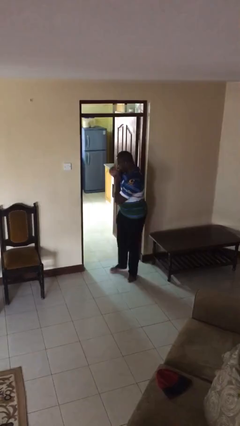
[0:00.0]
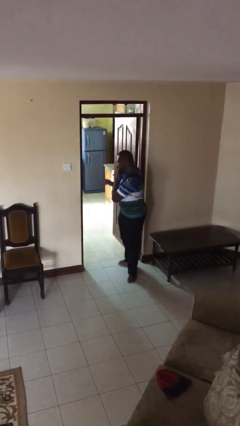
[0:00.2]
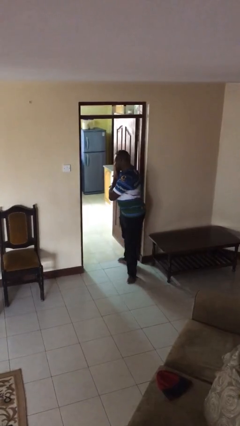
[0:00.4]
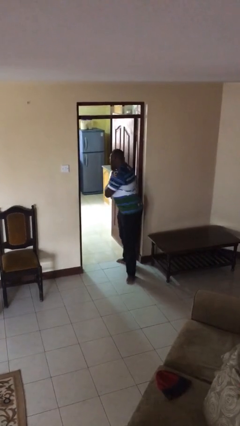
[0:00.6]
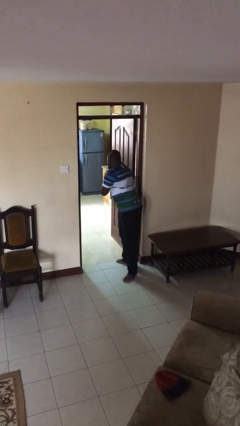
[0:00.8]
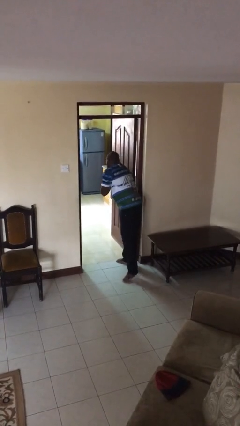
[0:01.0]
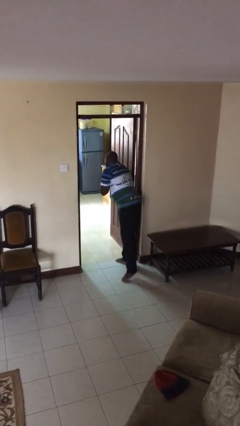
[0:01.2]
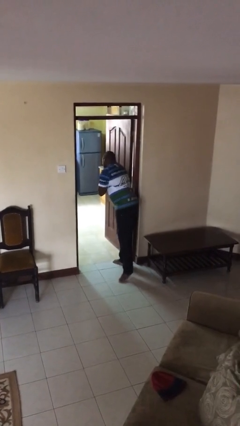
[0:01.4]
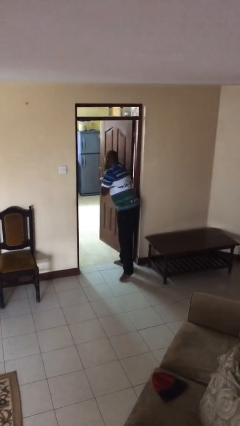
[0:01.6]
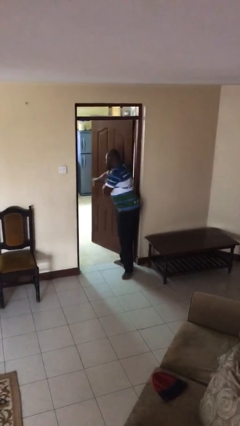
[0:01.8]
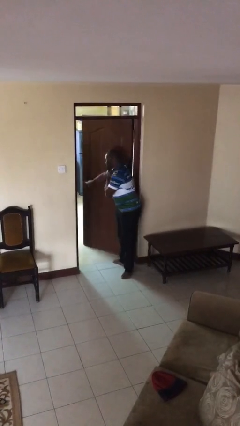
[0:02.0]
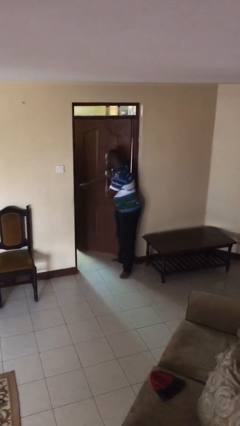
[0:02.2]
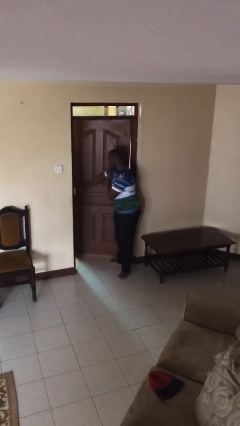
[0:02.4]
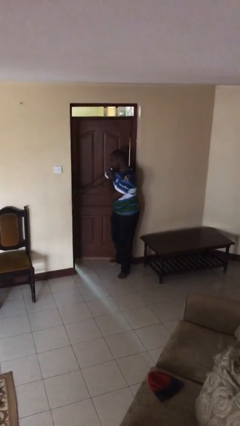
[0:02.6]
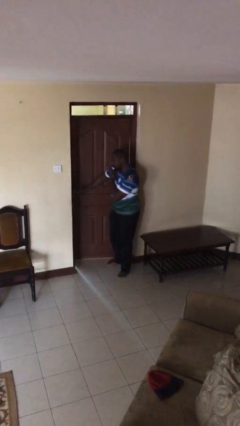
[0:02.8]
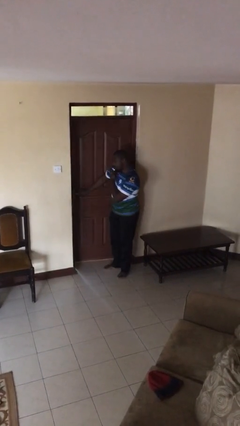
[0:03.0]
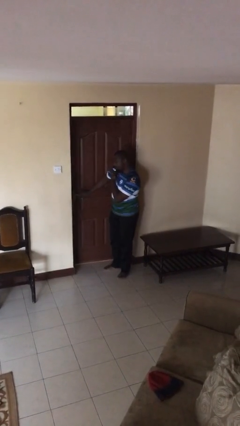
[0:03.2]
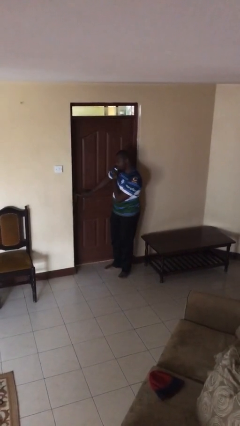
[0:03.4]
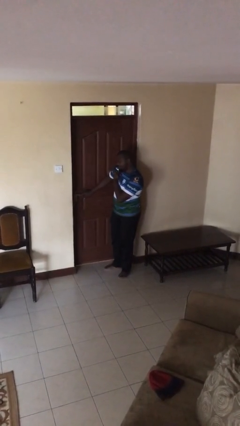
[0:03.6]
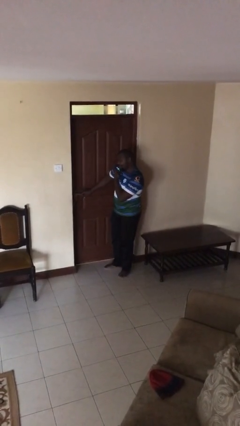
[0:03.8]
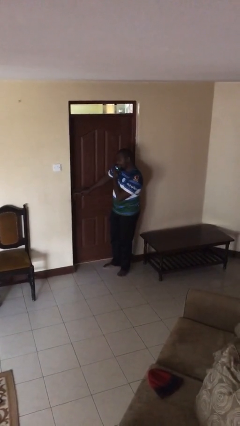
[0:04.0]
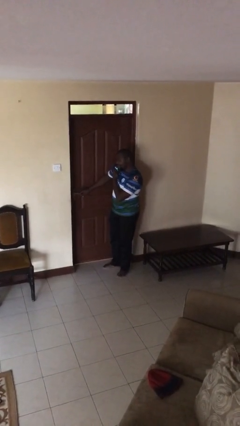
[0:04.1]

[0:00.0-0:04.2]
person closes facility door

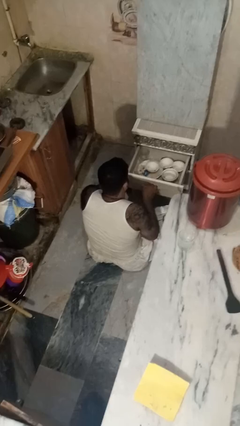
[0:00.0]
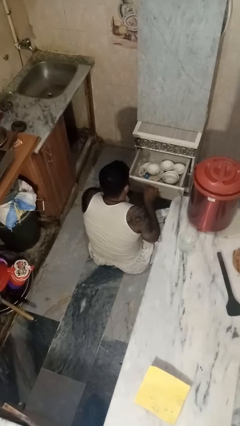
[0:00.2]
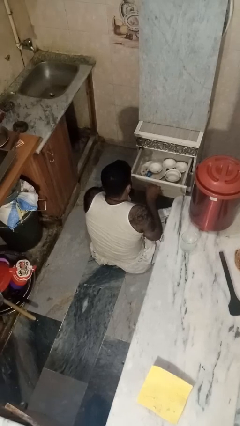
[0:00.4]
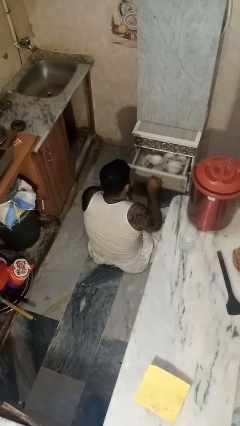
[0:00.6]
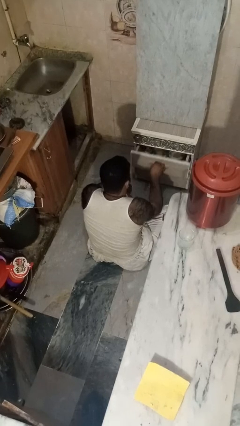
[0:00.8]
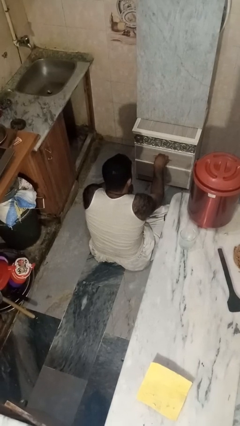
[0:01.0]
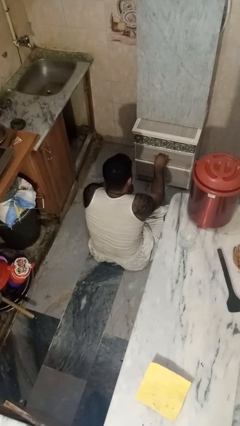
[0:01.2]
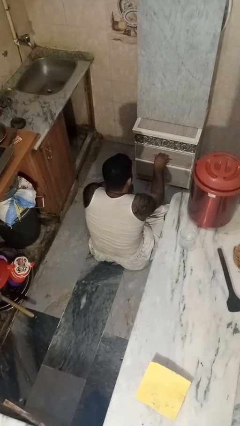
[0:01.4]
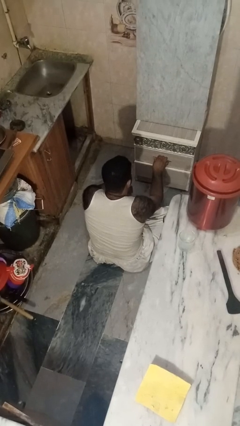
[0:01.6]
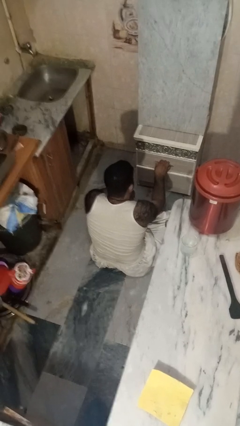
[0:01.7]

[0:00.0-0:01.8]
person closes kitchen drawer

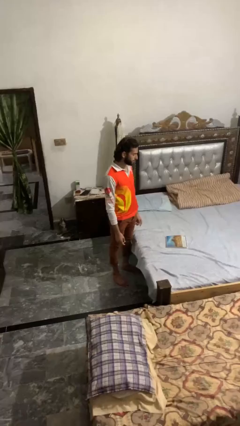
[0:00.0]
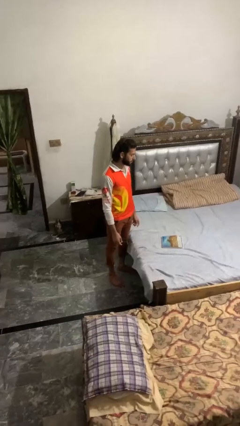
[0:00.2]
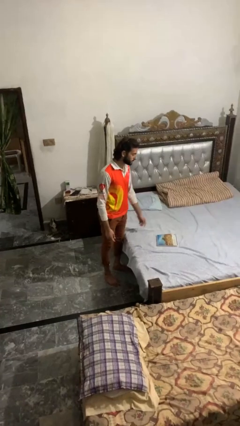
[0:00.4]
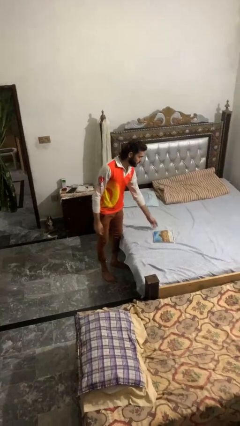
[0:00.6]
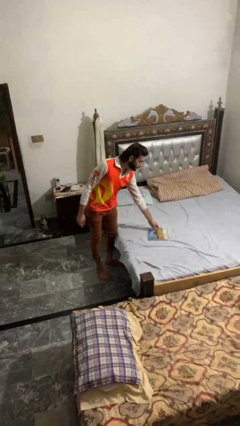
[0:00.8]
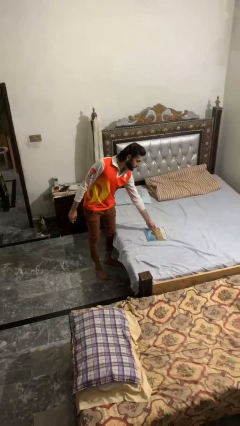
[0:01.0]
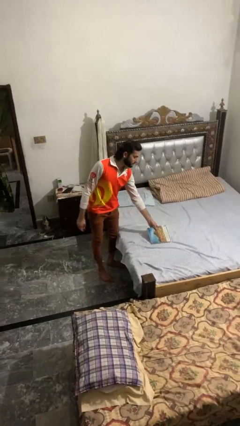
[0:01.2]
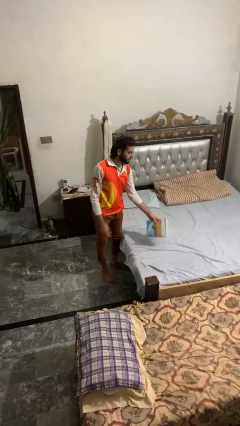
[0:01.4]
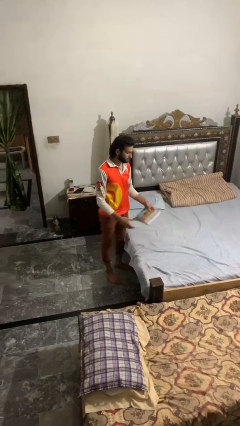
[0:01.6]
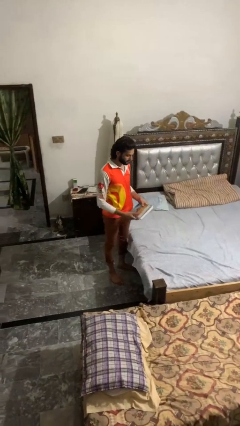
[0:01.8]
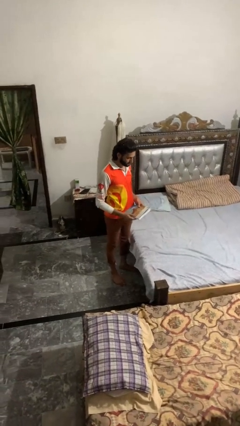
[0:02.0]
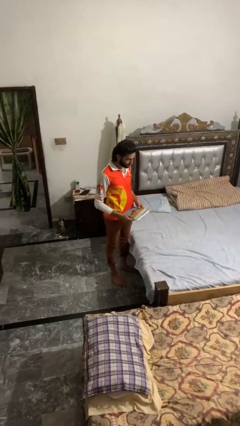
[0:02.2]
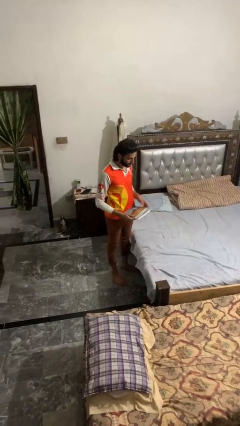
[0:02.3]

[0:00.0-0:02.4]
person picks up object from bed

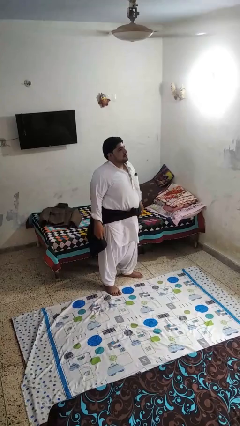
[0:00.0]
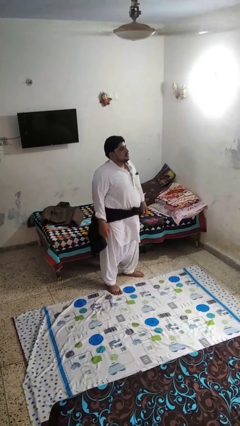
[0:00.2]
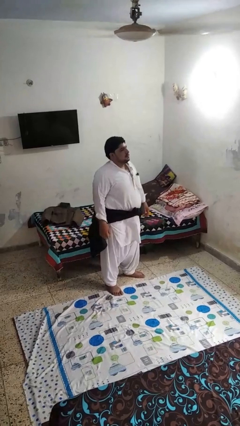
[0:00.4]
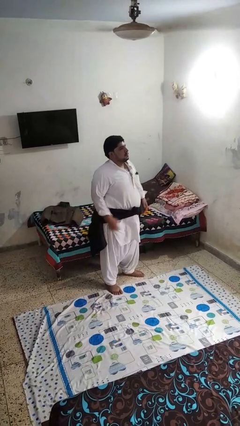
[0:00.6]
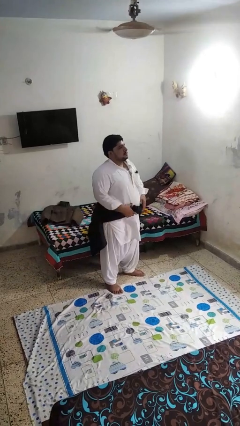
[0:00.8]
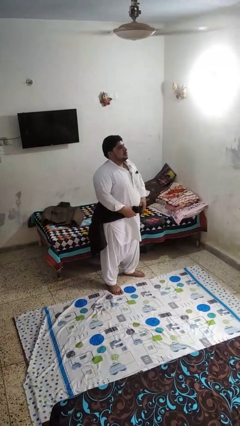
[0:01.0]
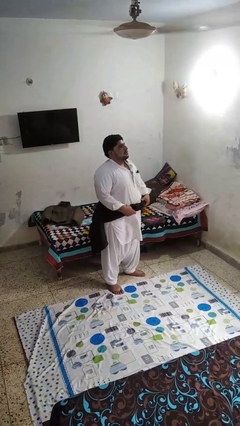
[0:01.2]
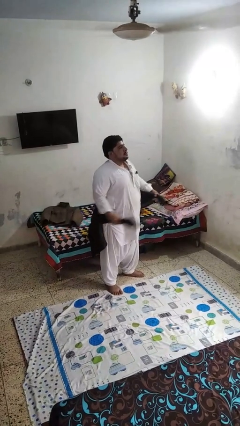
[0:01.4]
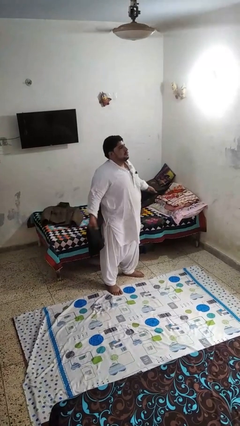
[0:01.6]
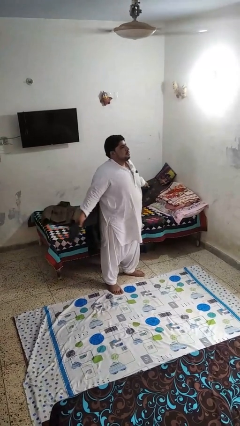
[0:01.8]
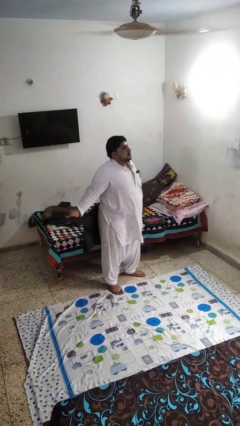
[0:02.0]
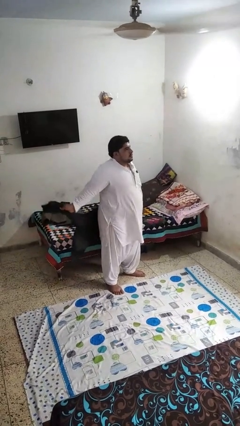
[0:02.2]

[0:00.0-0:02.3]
person unties jacket around waist

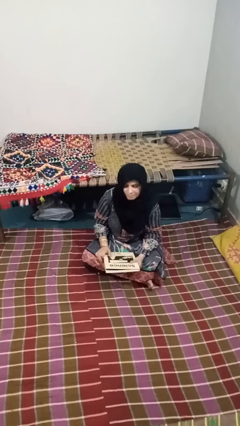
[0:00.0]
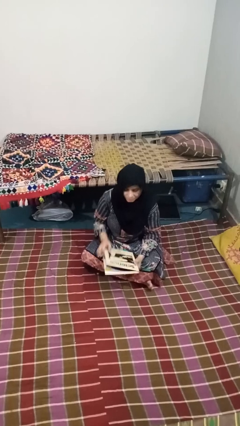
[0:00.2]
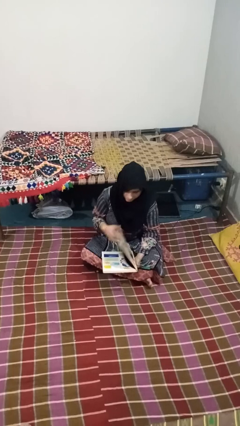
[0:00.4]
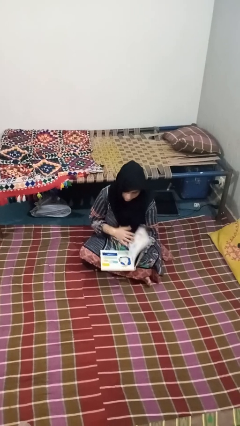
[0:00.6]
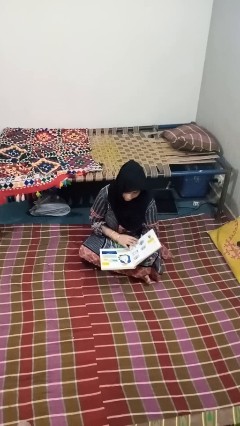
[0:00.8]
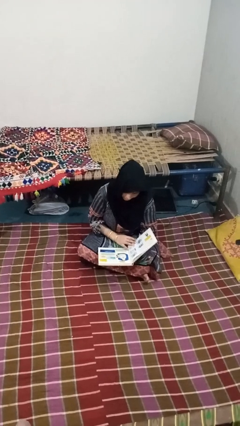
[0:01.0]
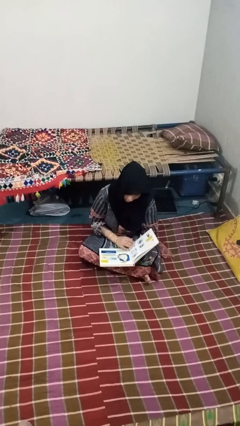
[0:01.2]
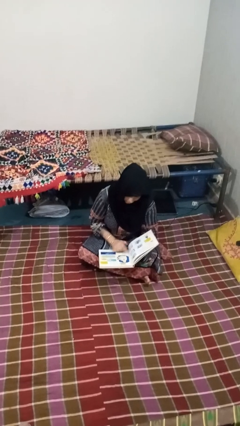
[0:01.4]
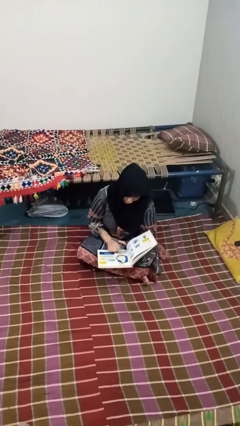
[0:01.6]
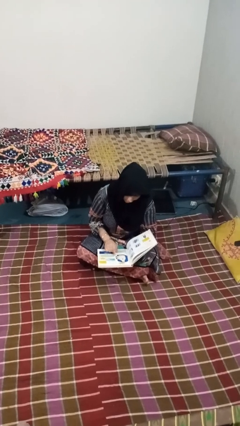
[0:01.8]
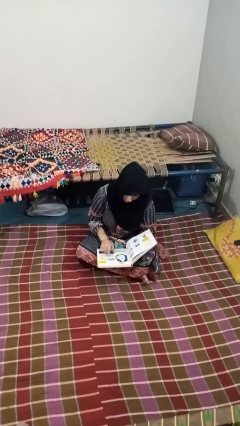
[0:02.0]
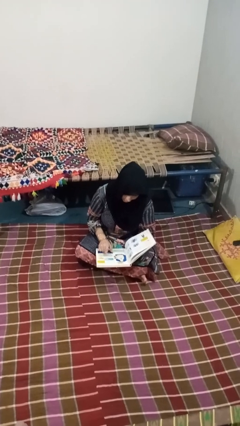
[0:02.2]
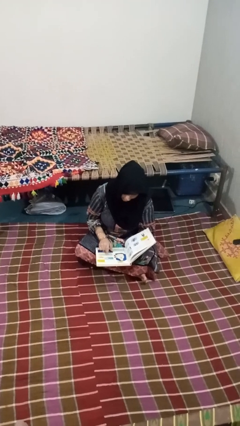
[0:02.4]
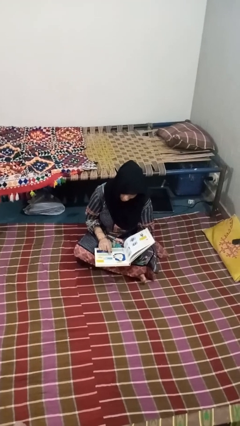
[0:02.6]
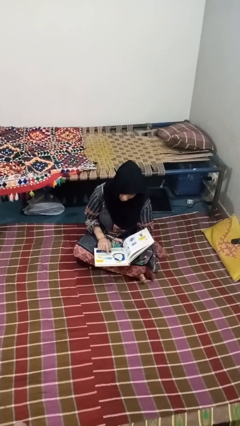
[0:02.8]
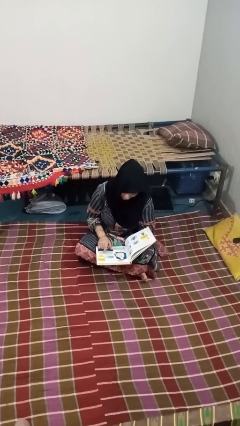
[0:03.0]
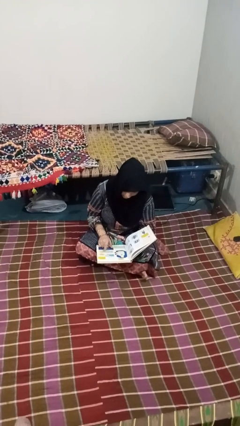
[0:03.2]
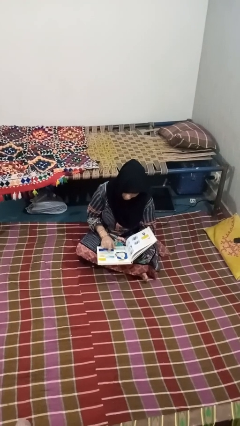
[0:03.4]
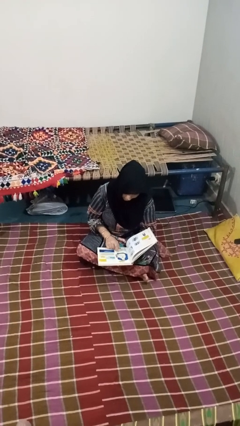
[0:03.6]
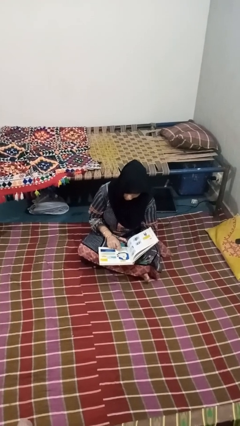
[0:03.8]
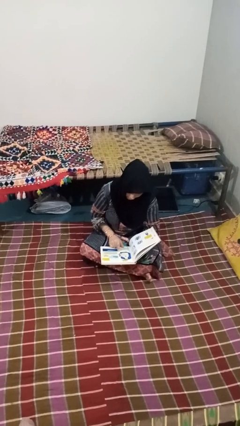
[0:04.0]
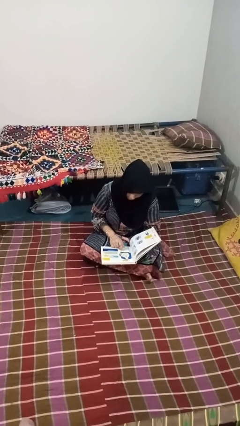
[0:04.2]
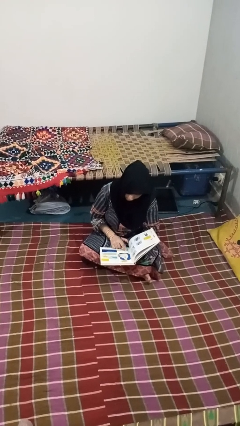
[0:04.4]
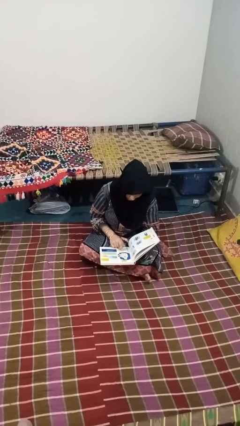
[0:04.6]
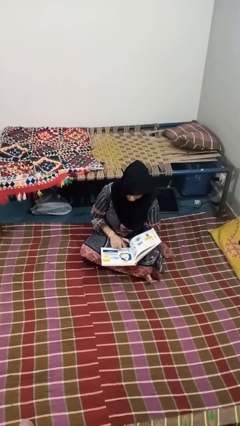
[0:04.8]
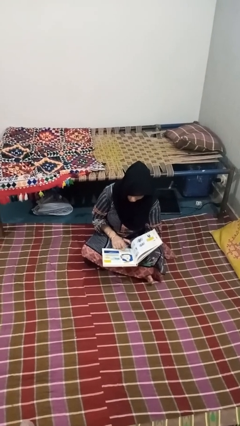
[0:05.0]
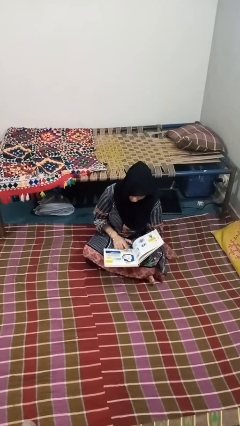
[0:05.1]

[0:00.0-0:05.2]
person reads magazine

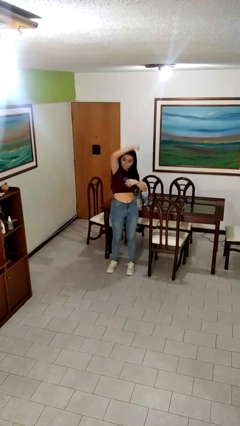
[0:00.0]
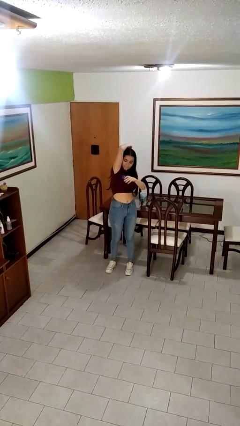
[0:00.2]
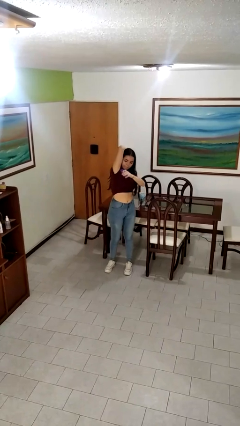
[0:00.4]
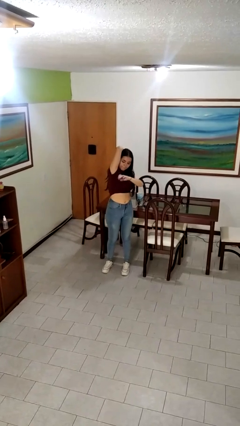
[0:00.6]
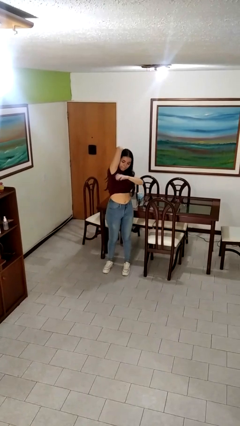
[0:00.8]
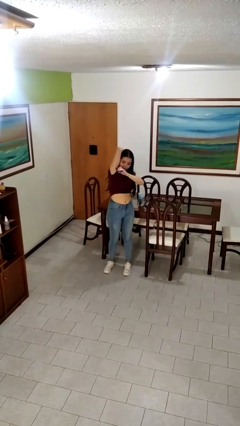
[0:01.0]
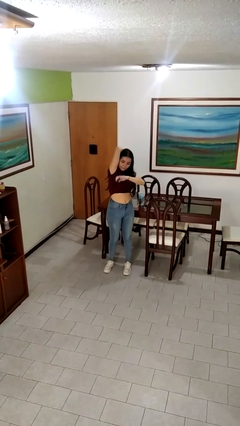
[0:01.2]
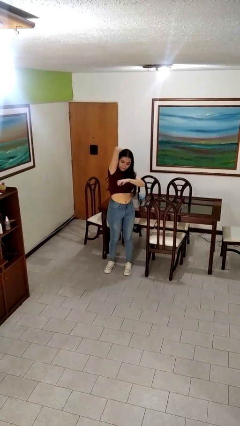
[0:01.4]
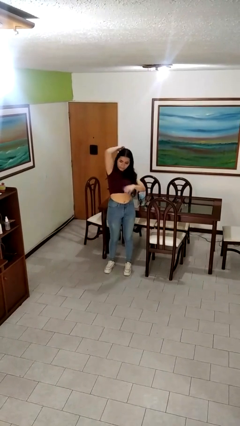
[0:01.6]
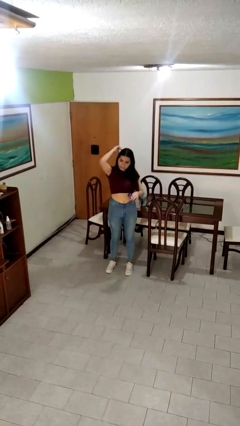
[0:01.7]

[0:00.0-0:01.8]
person applies deodorant
